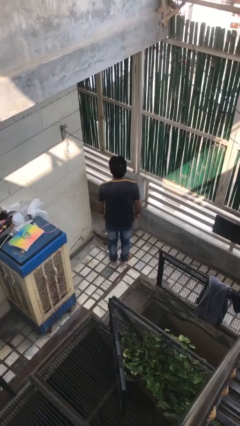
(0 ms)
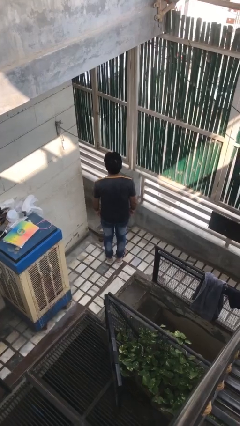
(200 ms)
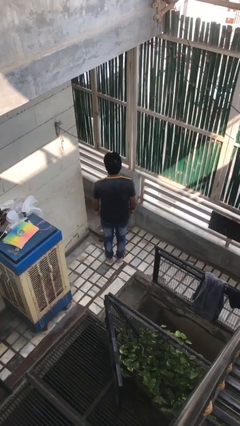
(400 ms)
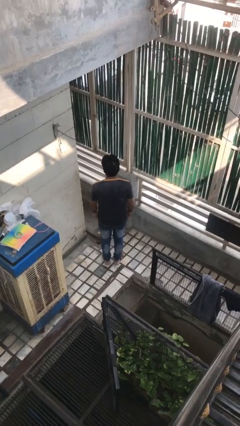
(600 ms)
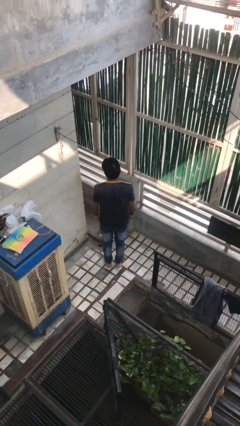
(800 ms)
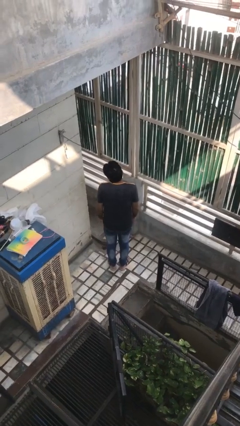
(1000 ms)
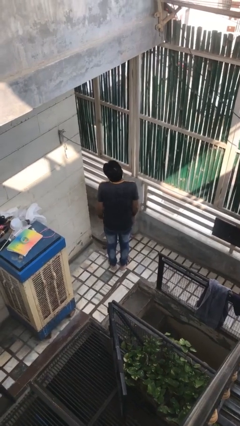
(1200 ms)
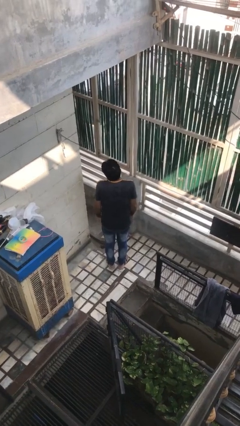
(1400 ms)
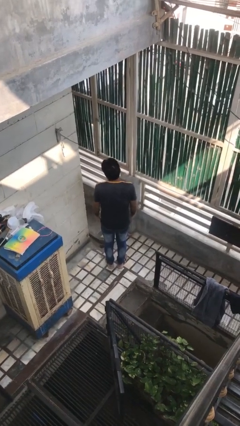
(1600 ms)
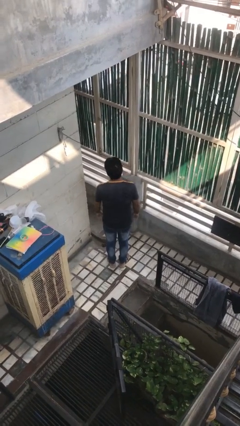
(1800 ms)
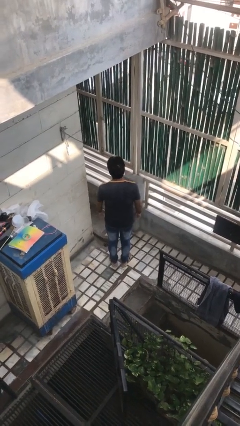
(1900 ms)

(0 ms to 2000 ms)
person shrugs

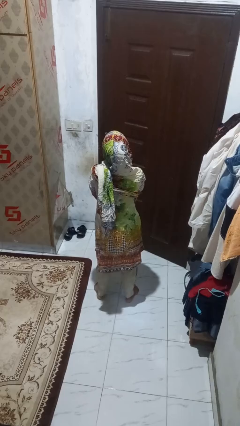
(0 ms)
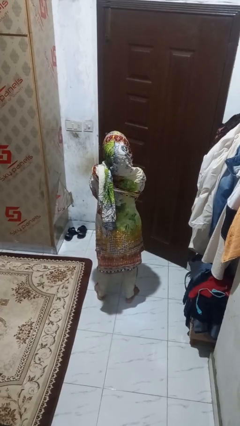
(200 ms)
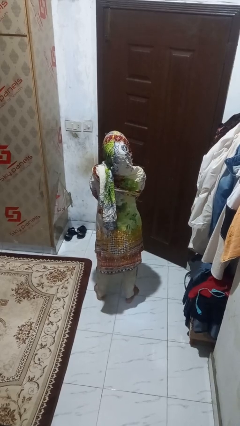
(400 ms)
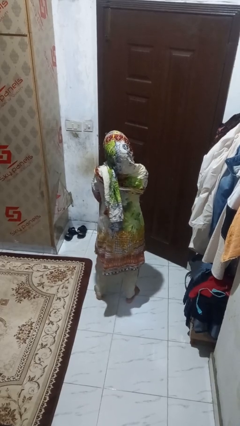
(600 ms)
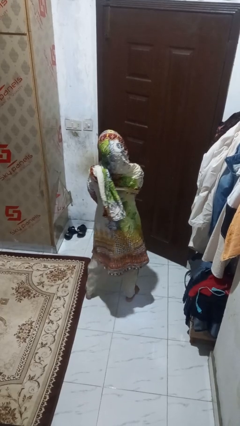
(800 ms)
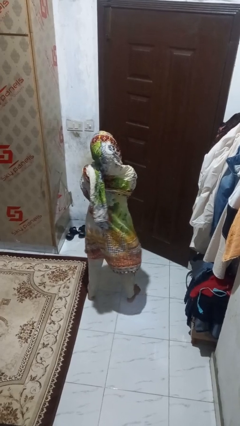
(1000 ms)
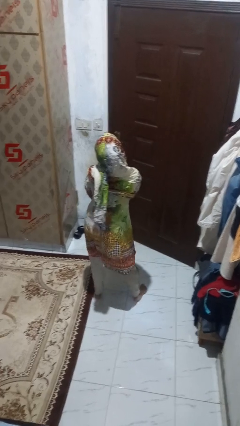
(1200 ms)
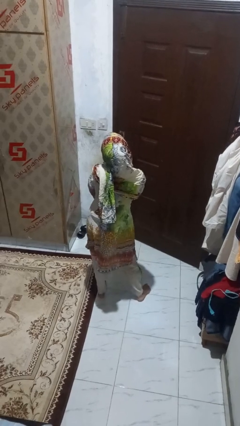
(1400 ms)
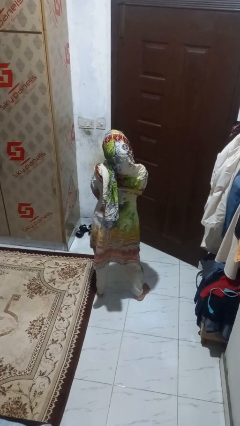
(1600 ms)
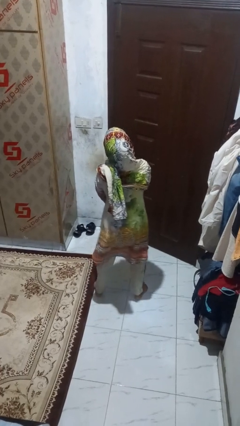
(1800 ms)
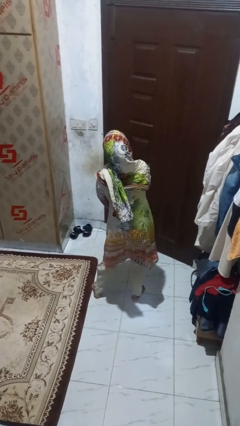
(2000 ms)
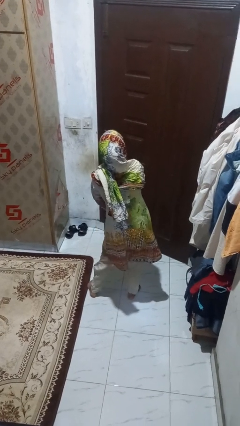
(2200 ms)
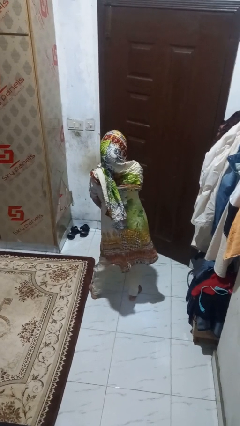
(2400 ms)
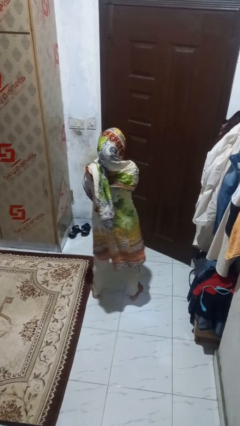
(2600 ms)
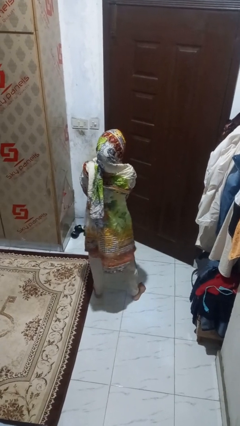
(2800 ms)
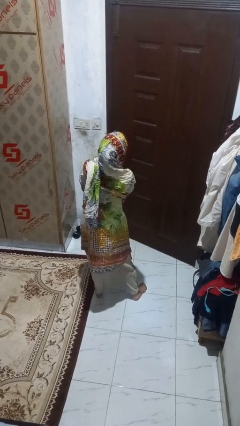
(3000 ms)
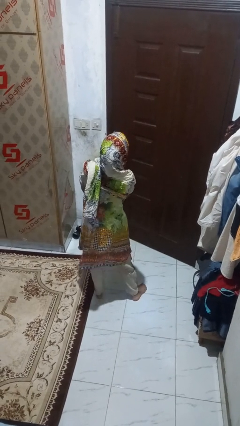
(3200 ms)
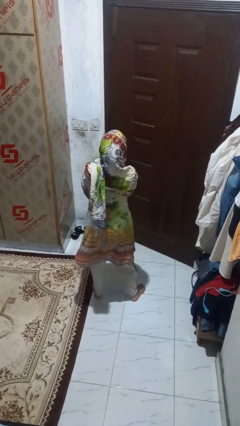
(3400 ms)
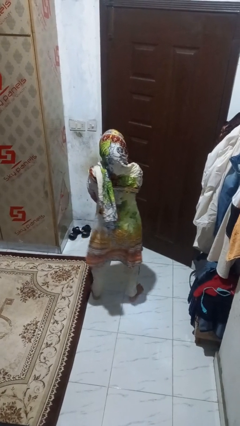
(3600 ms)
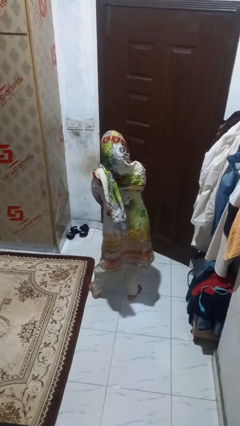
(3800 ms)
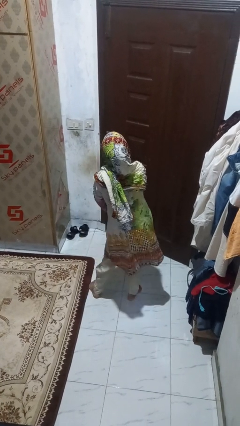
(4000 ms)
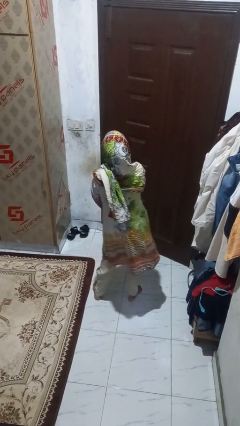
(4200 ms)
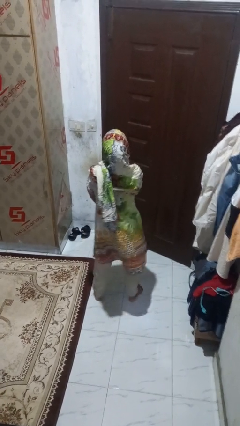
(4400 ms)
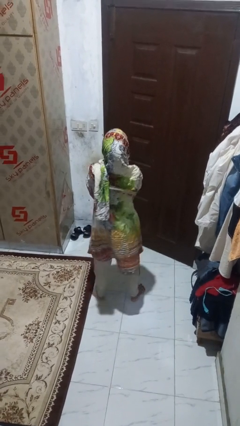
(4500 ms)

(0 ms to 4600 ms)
person wiggles hips

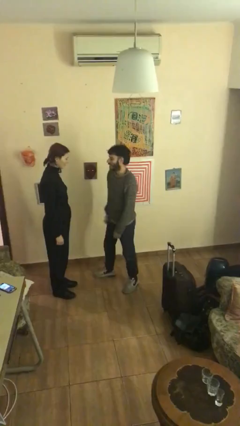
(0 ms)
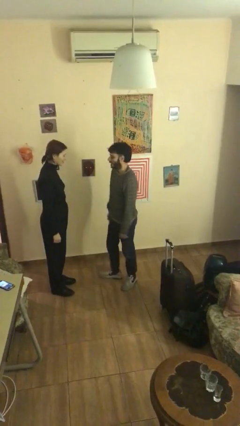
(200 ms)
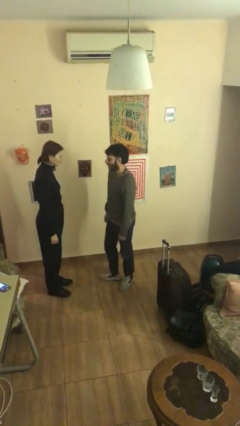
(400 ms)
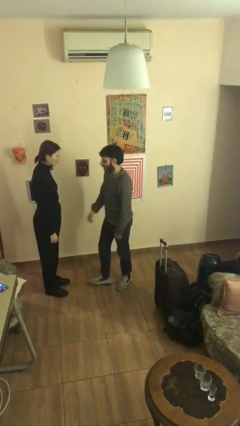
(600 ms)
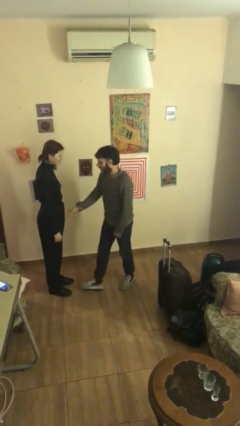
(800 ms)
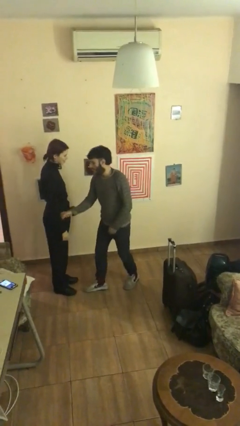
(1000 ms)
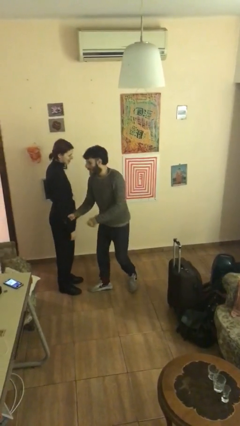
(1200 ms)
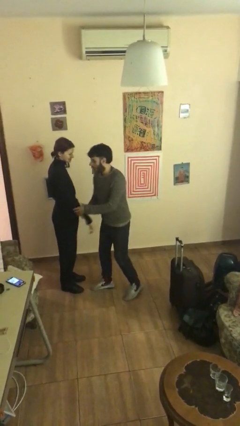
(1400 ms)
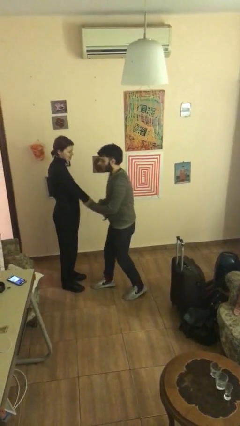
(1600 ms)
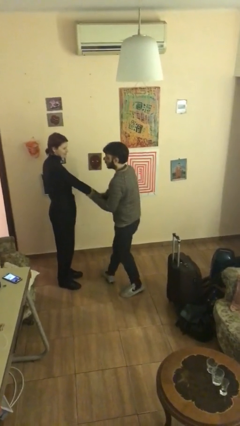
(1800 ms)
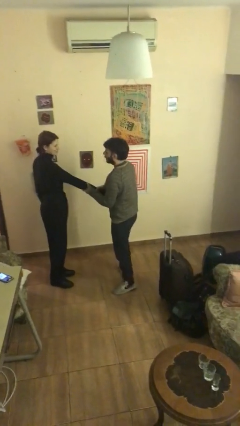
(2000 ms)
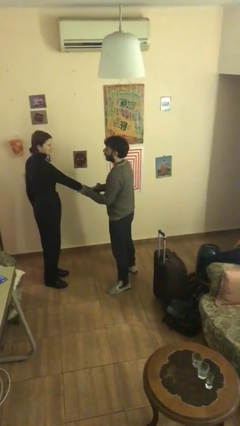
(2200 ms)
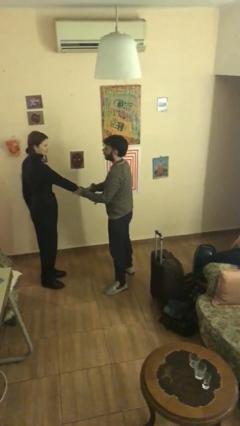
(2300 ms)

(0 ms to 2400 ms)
person grabs person by forearm

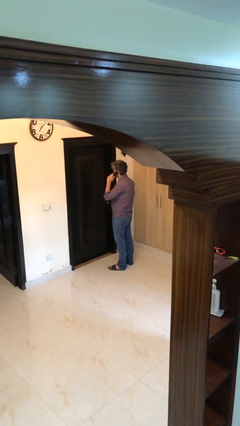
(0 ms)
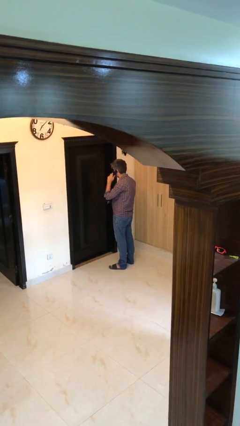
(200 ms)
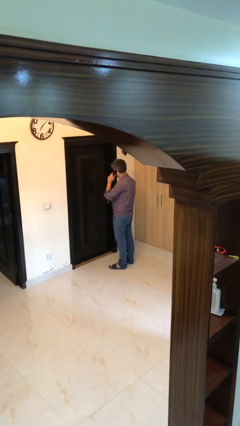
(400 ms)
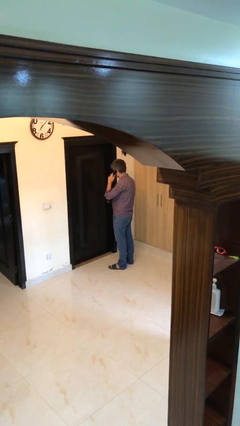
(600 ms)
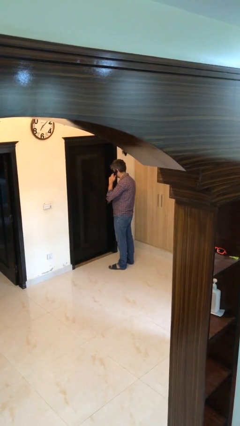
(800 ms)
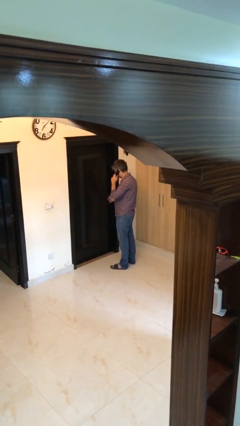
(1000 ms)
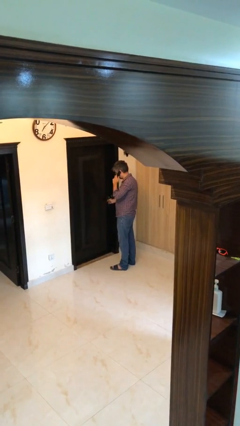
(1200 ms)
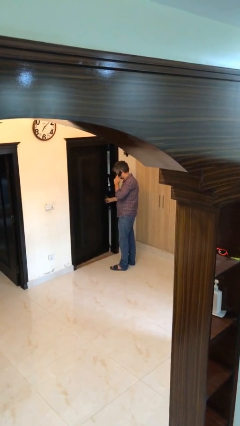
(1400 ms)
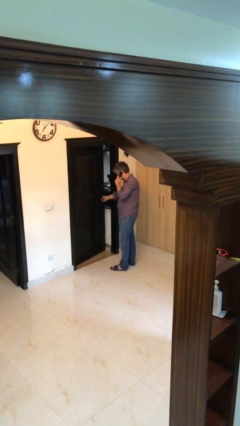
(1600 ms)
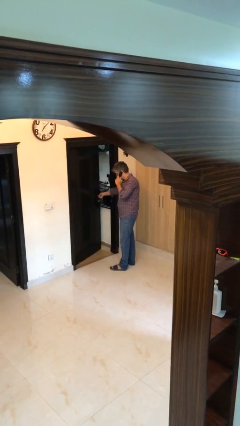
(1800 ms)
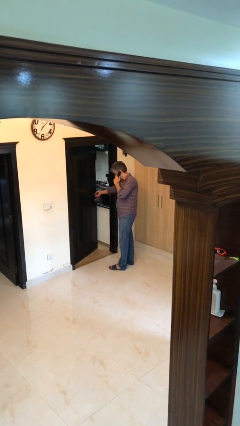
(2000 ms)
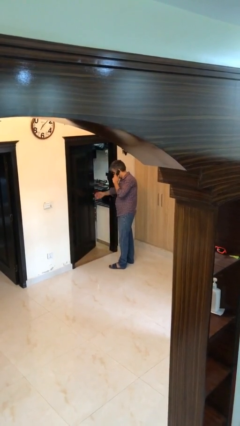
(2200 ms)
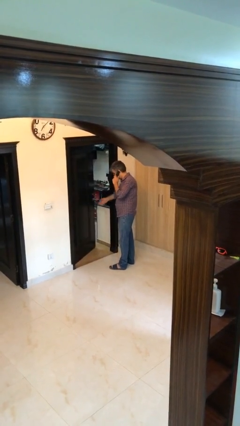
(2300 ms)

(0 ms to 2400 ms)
person opens facility door

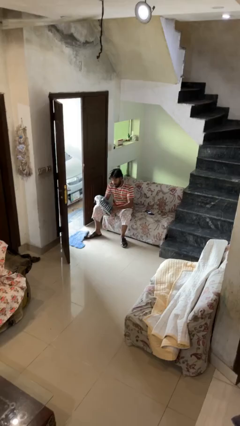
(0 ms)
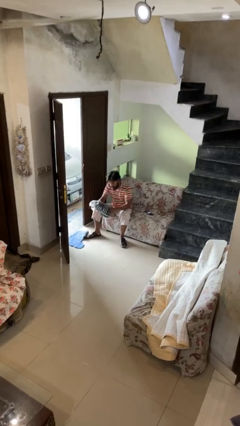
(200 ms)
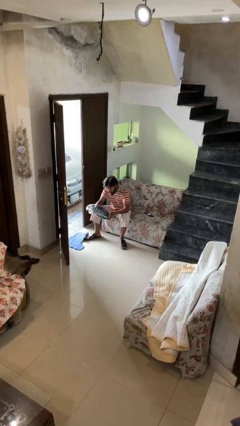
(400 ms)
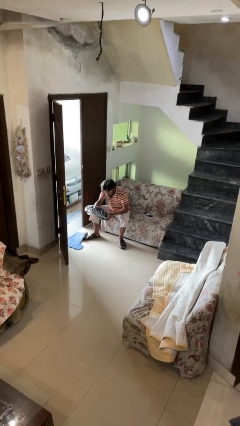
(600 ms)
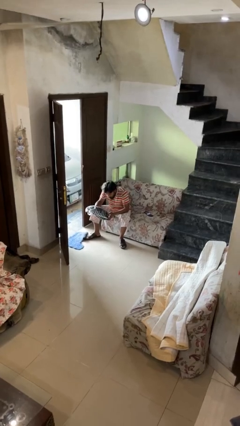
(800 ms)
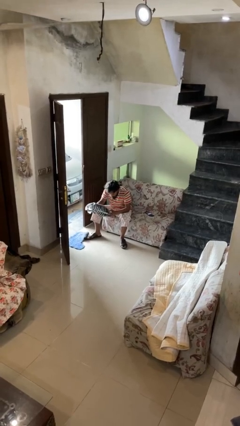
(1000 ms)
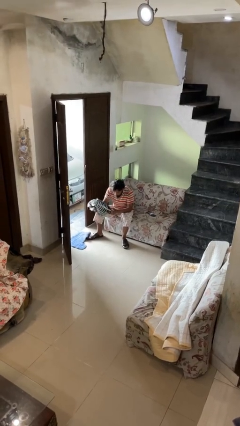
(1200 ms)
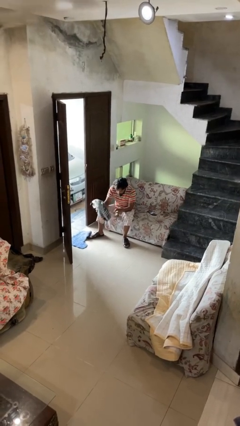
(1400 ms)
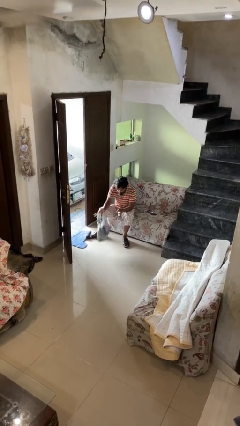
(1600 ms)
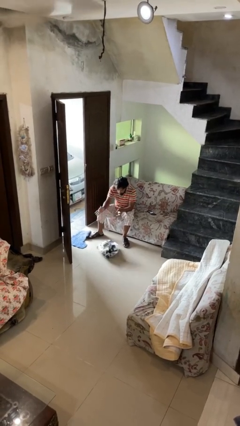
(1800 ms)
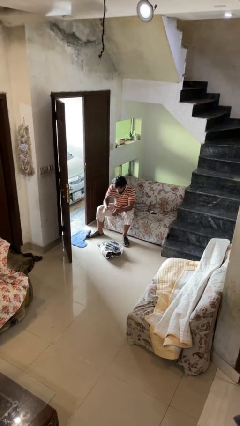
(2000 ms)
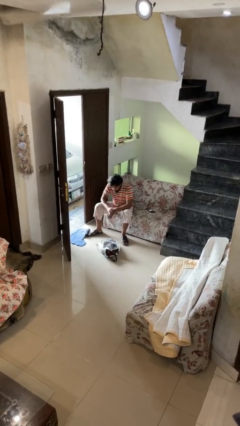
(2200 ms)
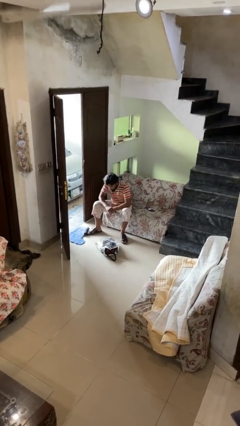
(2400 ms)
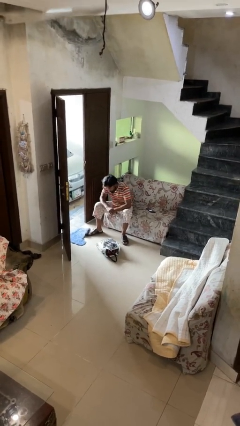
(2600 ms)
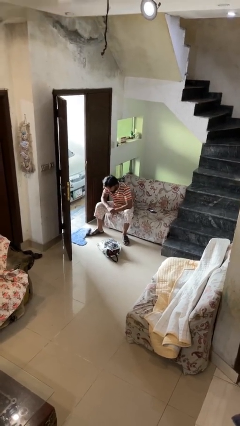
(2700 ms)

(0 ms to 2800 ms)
person drops object

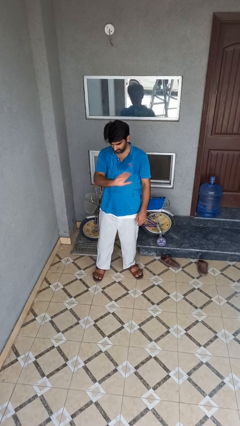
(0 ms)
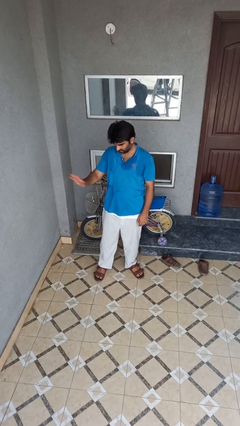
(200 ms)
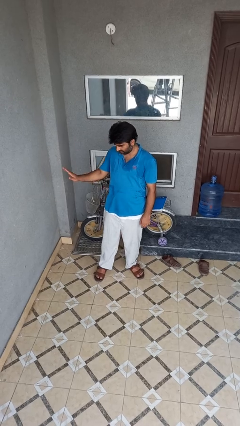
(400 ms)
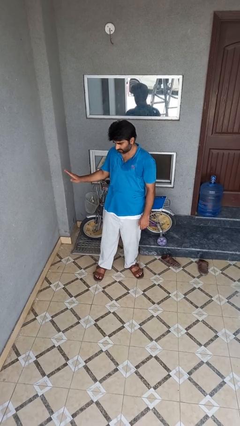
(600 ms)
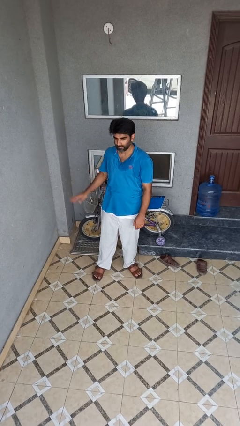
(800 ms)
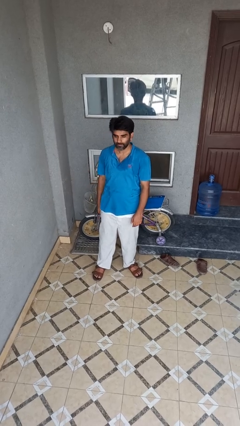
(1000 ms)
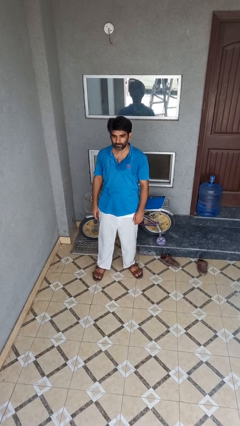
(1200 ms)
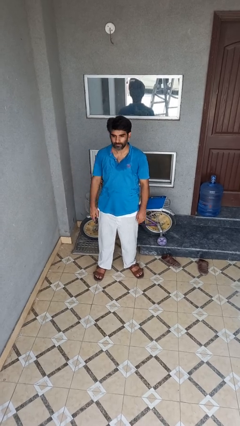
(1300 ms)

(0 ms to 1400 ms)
person gestures swipe right

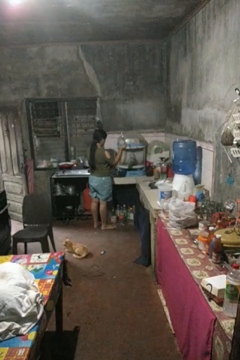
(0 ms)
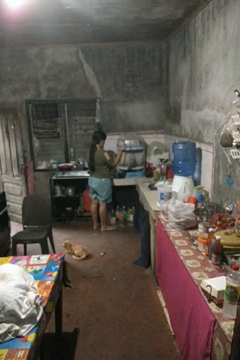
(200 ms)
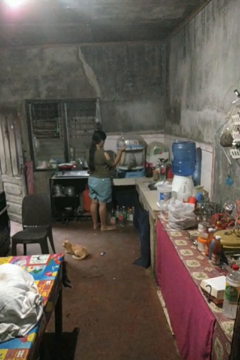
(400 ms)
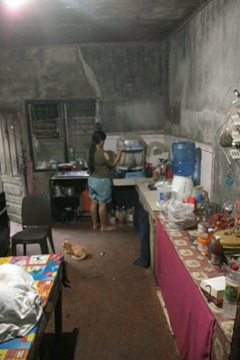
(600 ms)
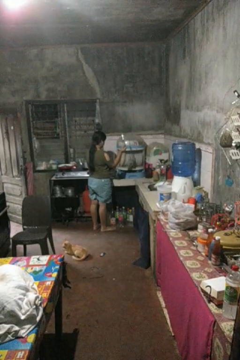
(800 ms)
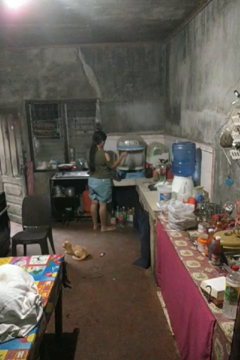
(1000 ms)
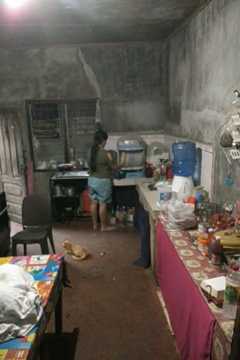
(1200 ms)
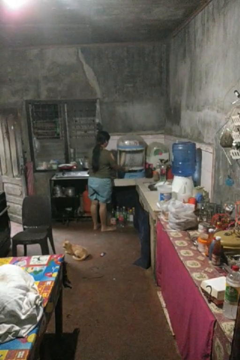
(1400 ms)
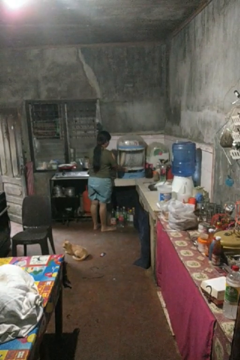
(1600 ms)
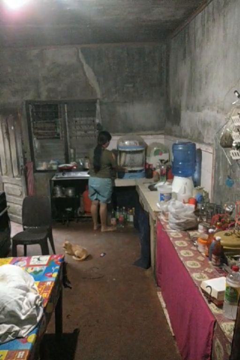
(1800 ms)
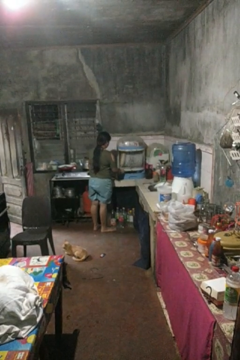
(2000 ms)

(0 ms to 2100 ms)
person puts object into kitchen drawer
